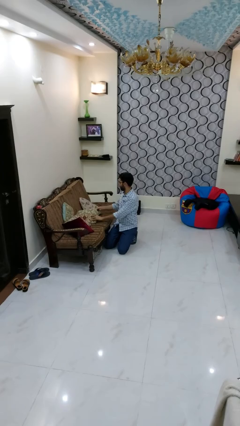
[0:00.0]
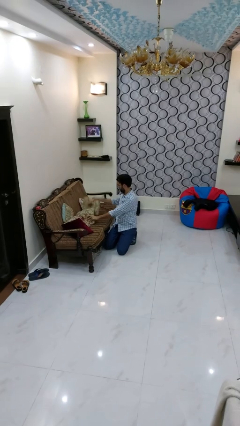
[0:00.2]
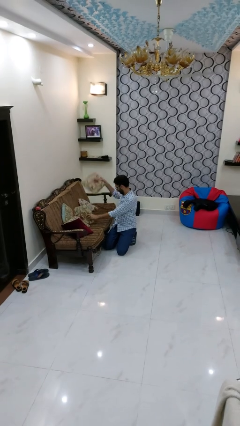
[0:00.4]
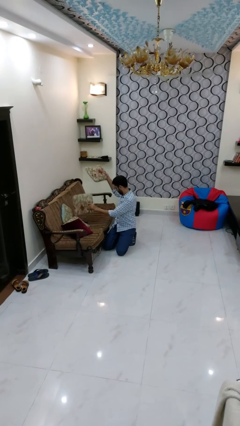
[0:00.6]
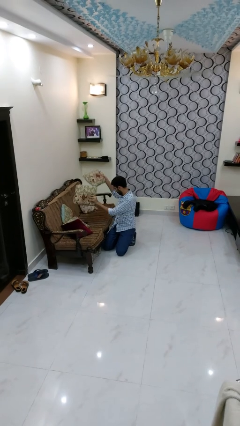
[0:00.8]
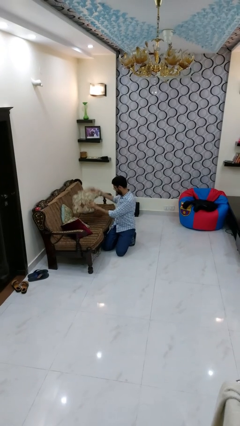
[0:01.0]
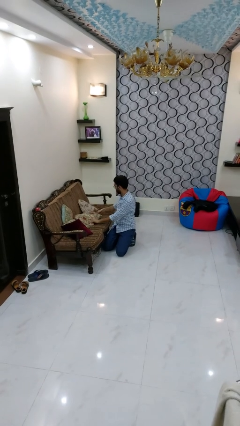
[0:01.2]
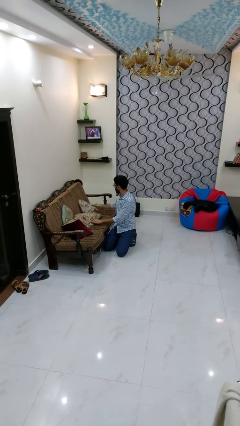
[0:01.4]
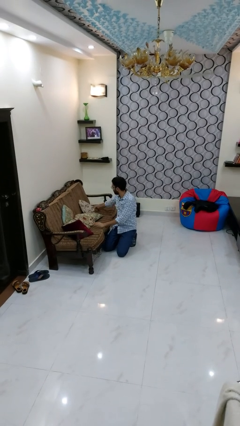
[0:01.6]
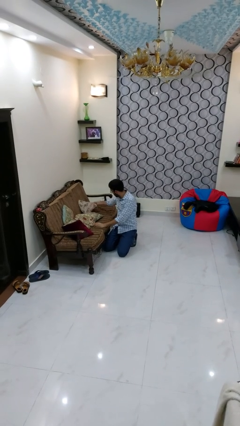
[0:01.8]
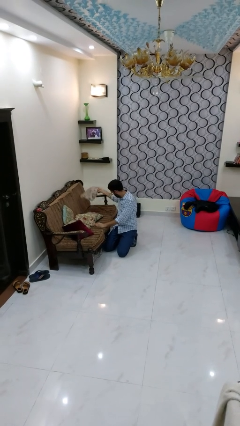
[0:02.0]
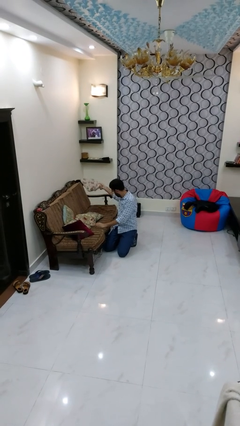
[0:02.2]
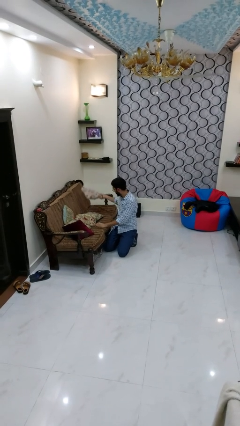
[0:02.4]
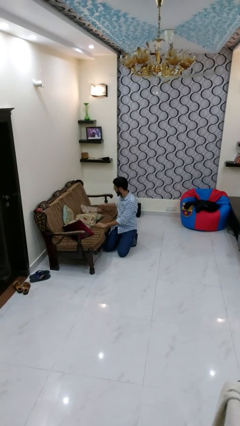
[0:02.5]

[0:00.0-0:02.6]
person searches in couch

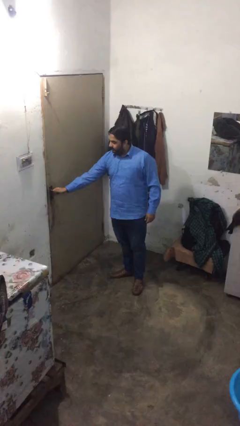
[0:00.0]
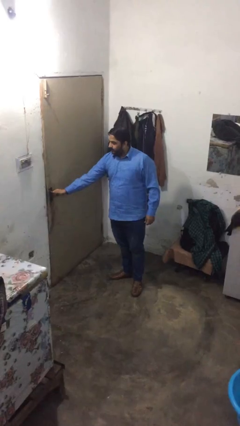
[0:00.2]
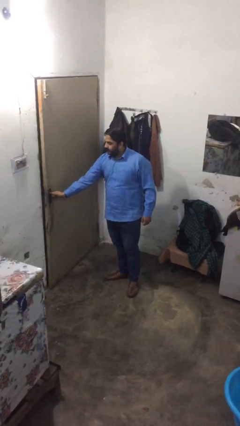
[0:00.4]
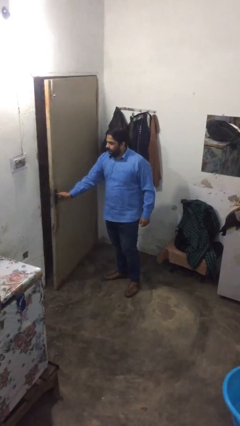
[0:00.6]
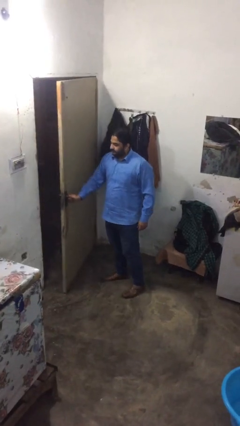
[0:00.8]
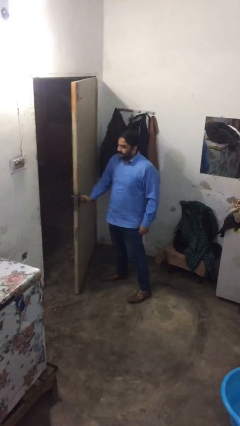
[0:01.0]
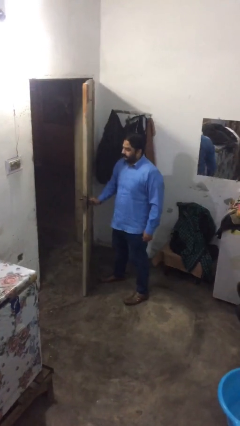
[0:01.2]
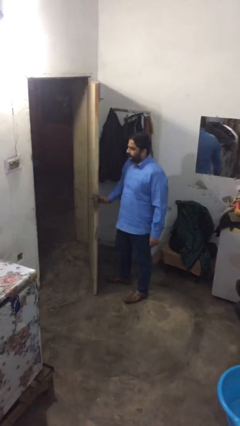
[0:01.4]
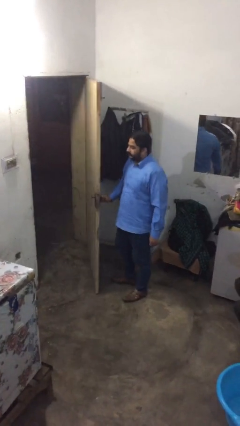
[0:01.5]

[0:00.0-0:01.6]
person opens facility door

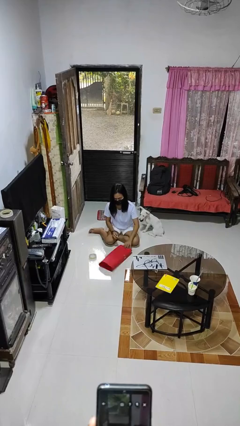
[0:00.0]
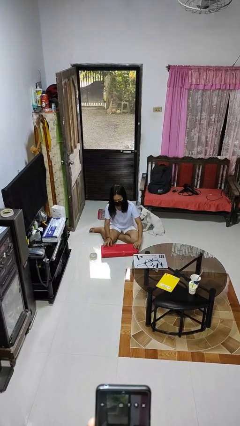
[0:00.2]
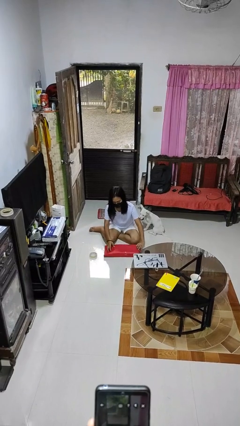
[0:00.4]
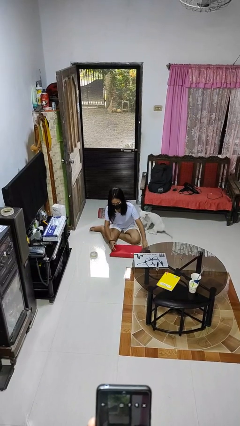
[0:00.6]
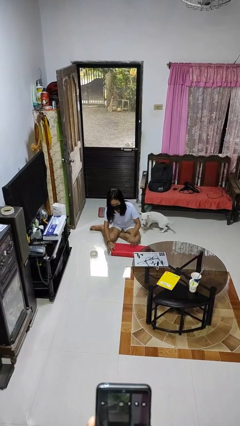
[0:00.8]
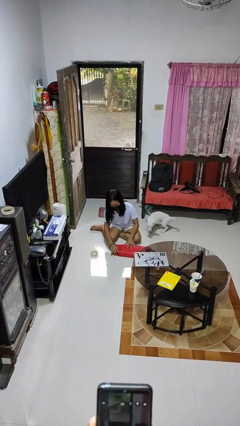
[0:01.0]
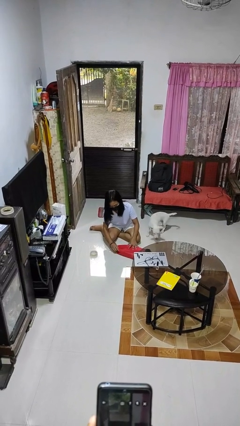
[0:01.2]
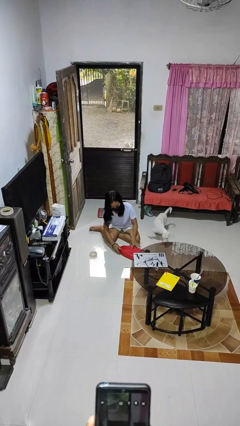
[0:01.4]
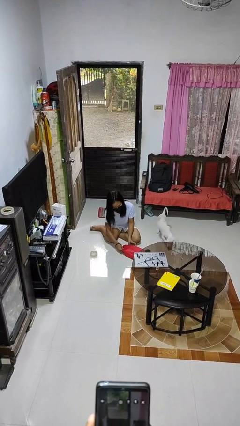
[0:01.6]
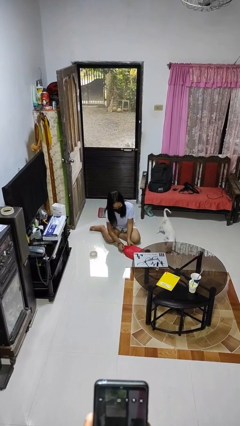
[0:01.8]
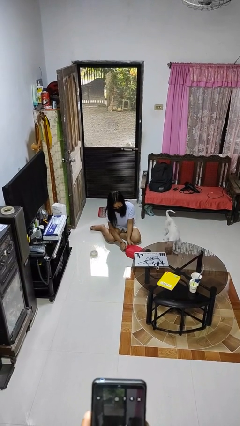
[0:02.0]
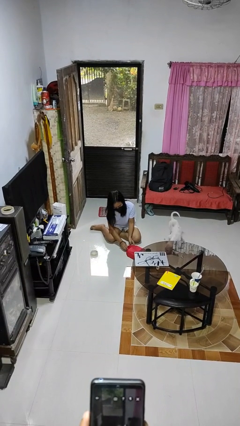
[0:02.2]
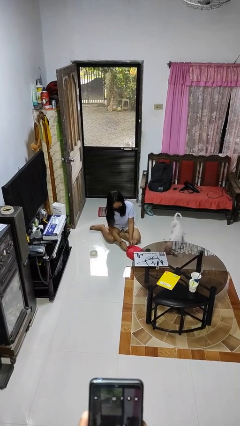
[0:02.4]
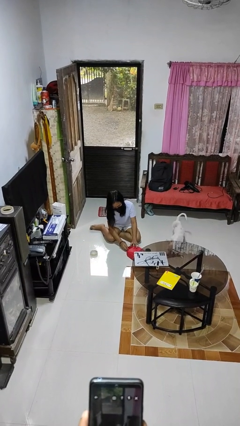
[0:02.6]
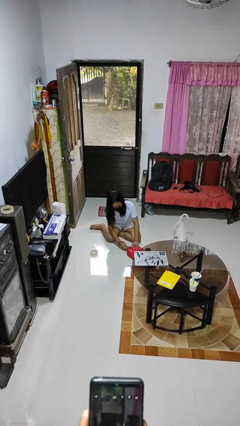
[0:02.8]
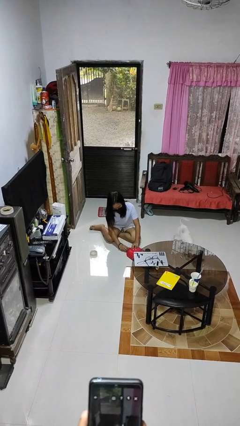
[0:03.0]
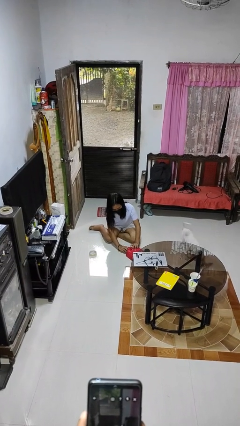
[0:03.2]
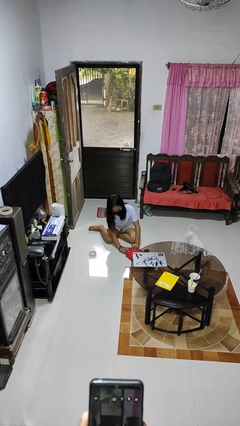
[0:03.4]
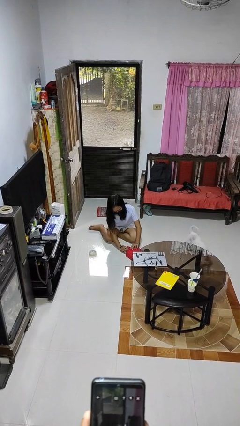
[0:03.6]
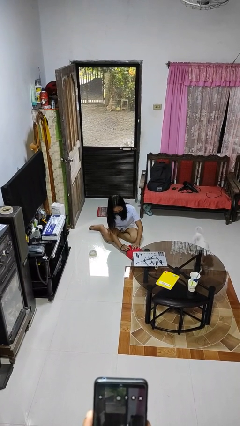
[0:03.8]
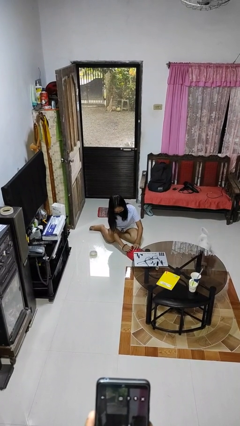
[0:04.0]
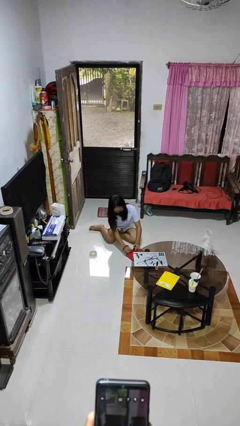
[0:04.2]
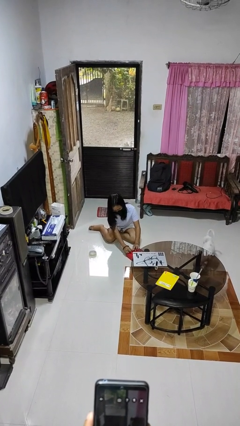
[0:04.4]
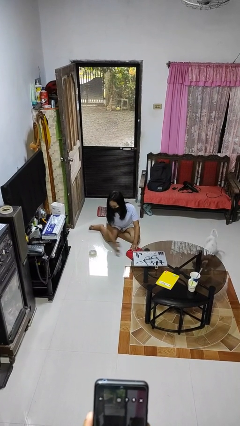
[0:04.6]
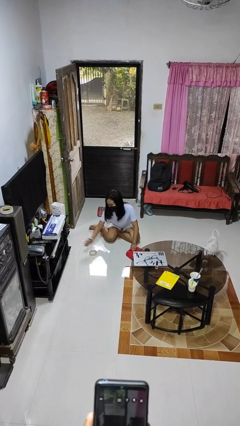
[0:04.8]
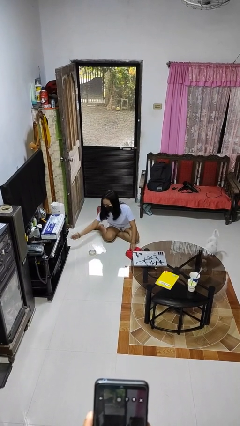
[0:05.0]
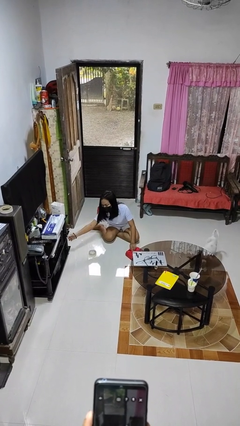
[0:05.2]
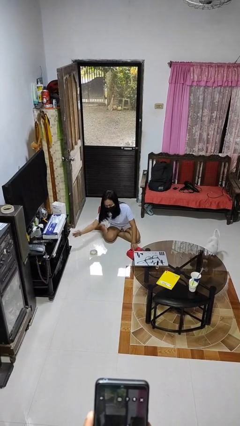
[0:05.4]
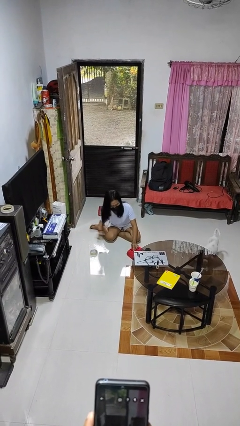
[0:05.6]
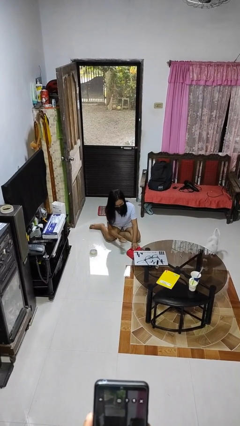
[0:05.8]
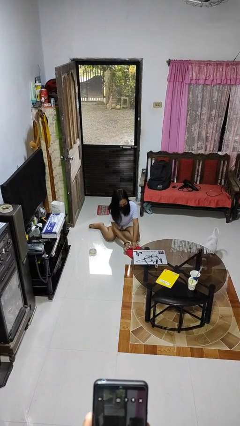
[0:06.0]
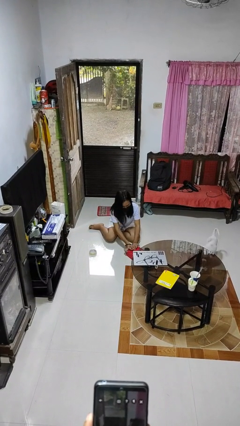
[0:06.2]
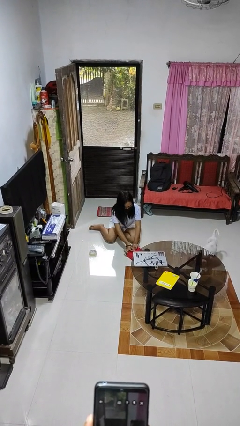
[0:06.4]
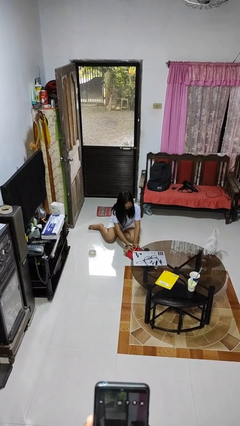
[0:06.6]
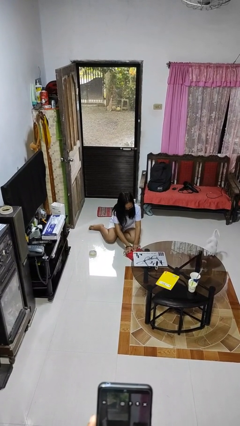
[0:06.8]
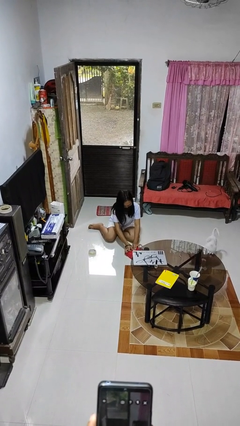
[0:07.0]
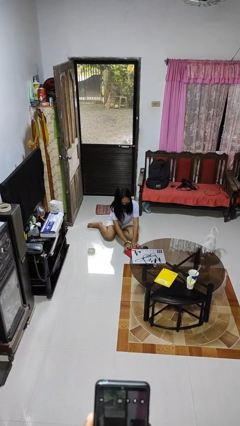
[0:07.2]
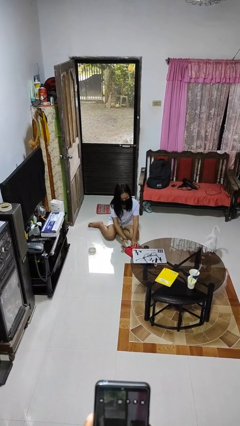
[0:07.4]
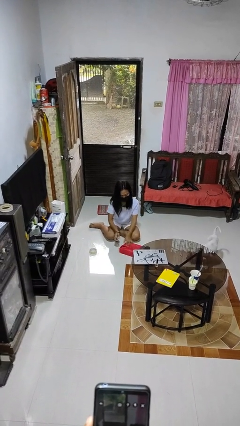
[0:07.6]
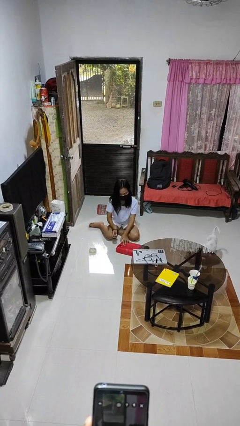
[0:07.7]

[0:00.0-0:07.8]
person wraps box

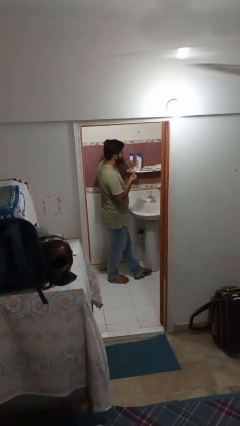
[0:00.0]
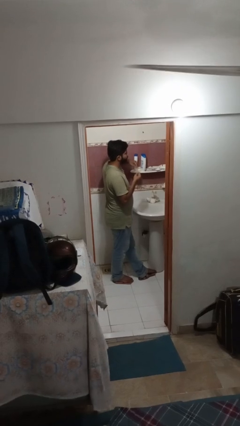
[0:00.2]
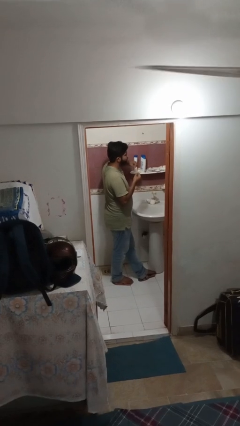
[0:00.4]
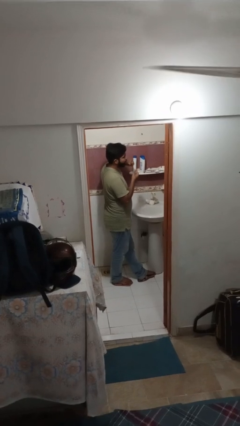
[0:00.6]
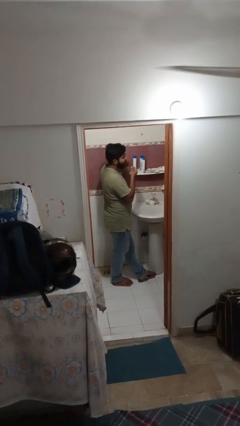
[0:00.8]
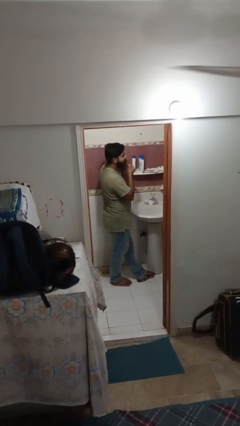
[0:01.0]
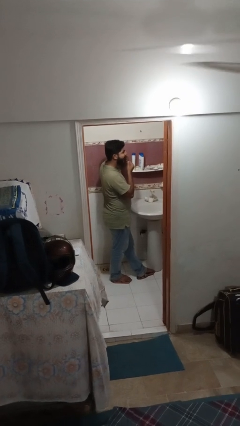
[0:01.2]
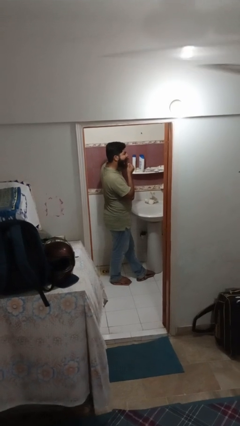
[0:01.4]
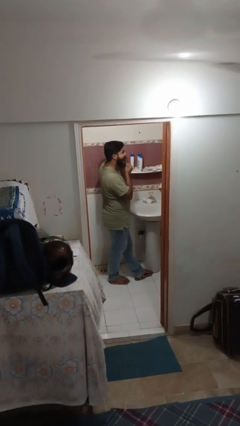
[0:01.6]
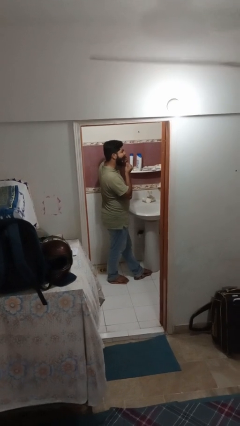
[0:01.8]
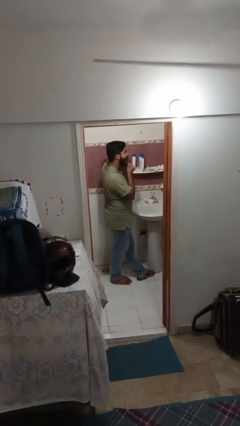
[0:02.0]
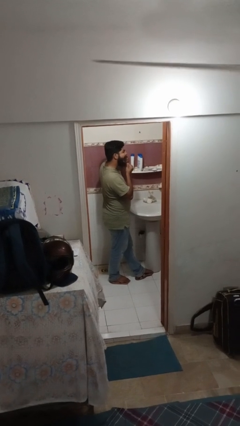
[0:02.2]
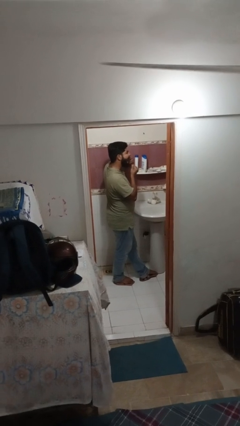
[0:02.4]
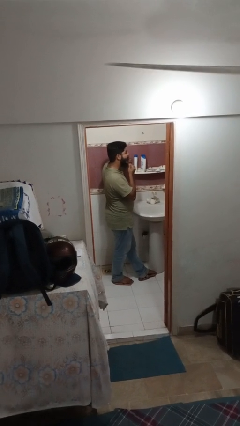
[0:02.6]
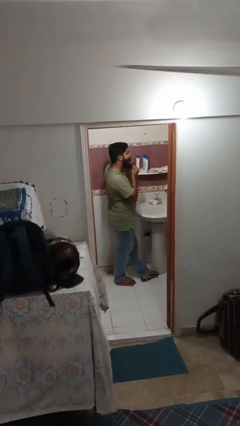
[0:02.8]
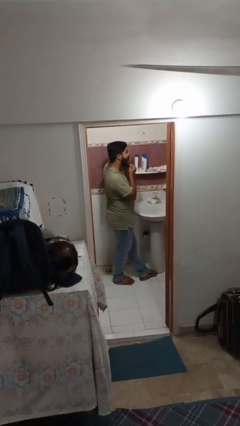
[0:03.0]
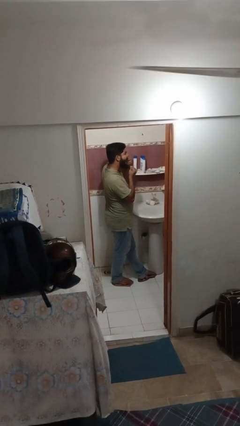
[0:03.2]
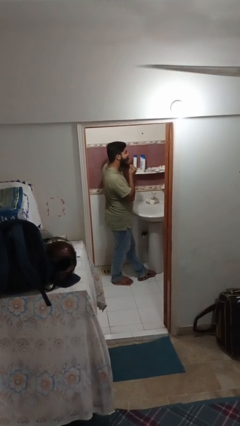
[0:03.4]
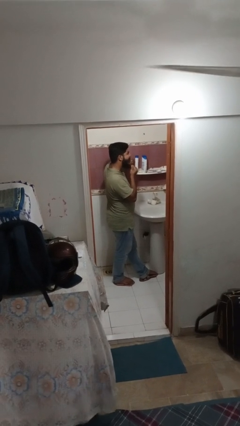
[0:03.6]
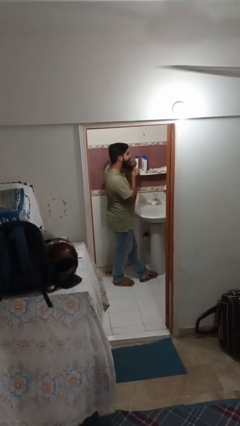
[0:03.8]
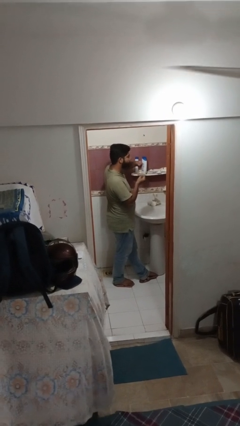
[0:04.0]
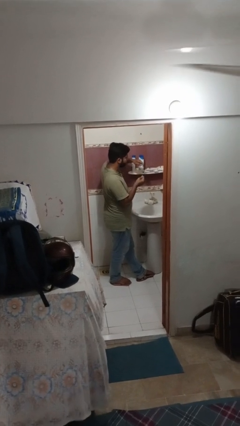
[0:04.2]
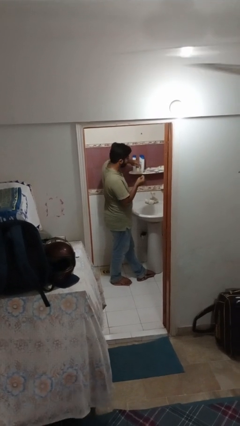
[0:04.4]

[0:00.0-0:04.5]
person flosses

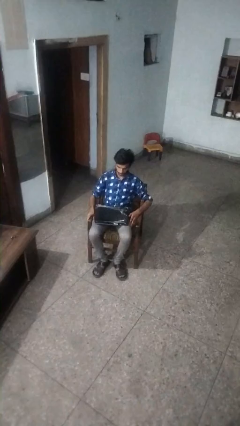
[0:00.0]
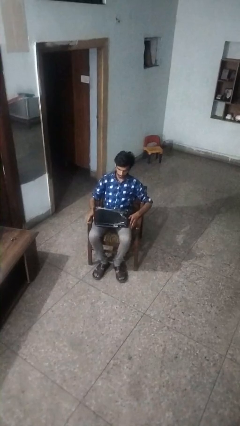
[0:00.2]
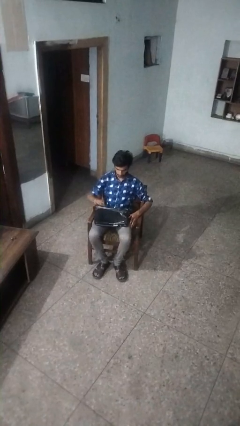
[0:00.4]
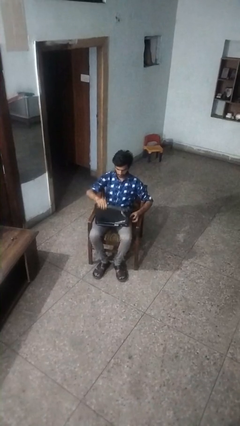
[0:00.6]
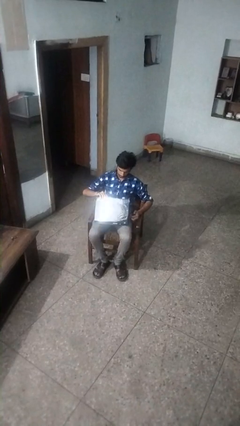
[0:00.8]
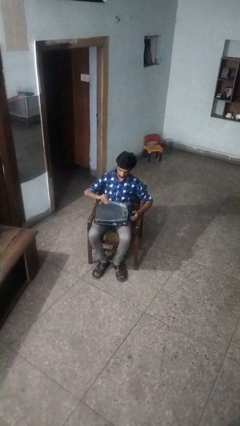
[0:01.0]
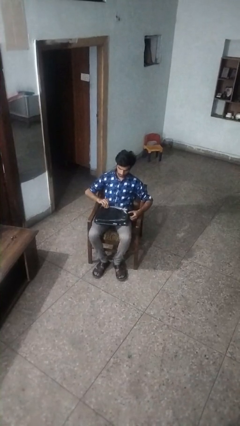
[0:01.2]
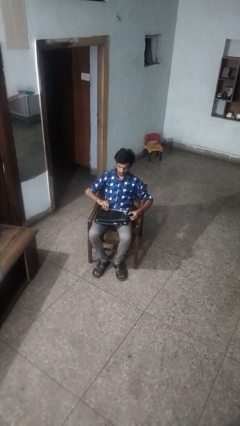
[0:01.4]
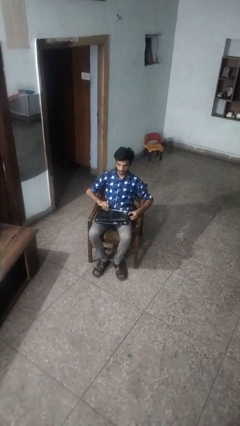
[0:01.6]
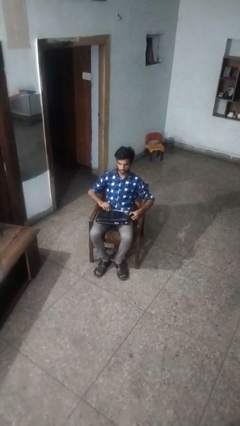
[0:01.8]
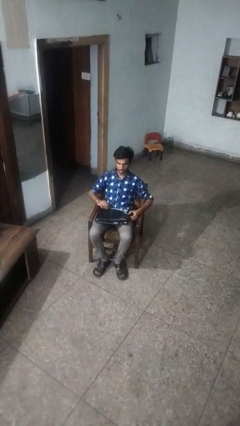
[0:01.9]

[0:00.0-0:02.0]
person closes laptop
